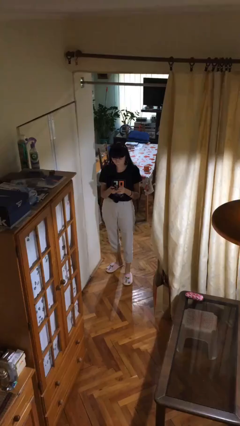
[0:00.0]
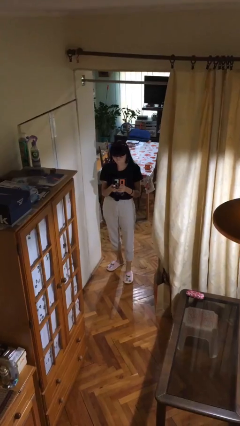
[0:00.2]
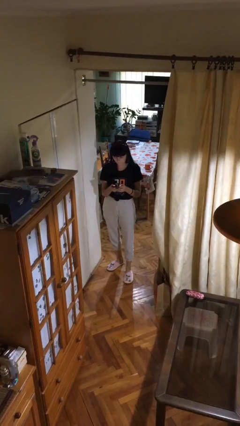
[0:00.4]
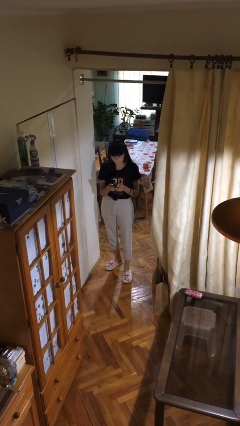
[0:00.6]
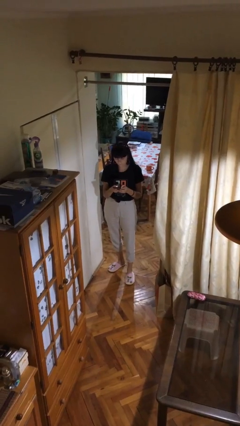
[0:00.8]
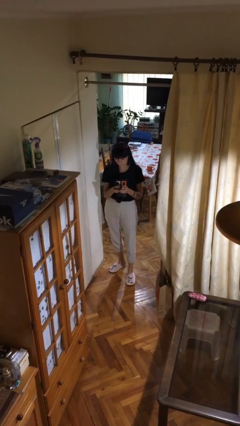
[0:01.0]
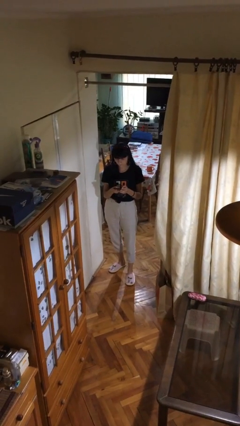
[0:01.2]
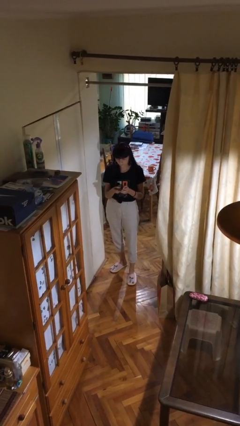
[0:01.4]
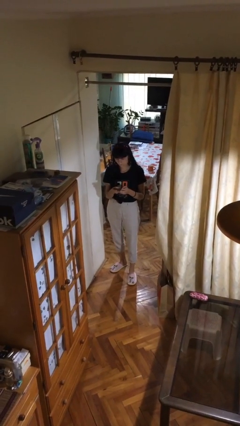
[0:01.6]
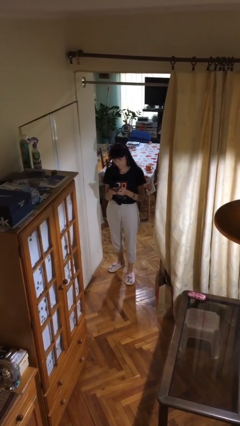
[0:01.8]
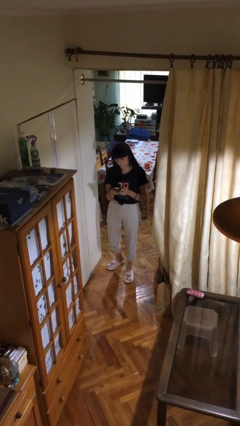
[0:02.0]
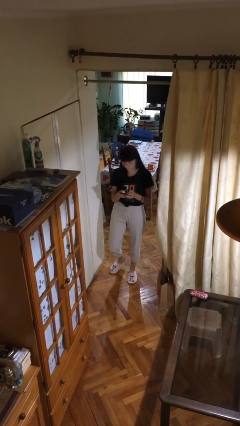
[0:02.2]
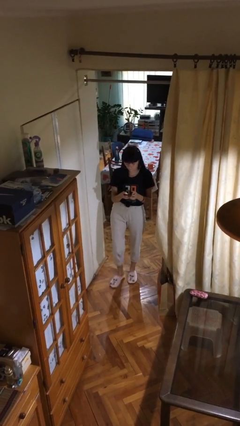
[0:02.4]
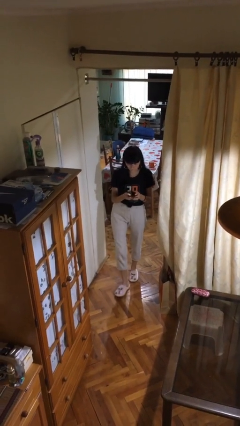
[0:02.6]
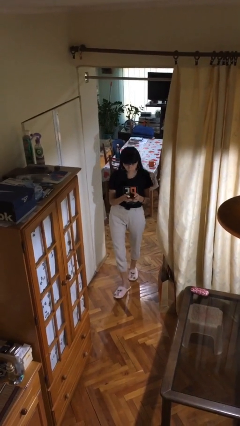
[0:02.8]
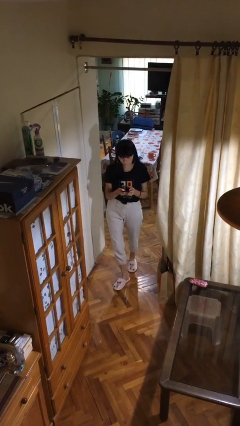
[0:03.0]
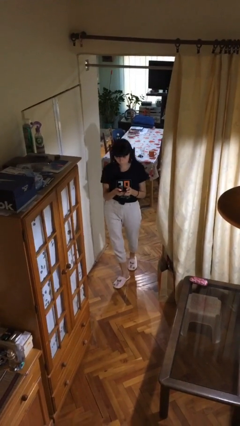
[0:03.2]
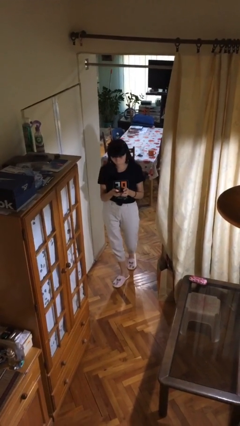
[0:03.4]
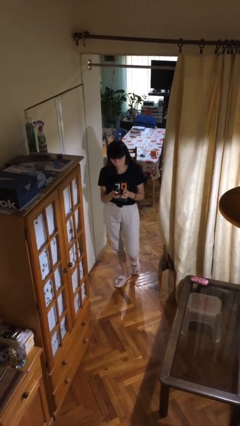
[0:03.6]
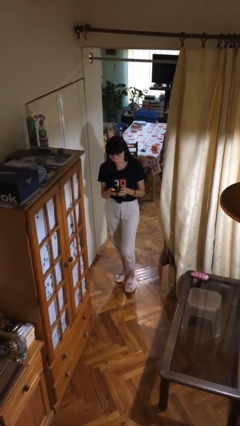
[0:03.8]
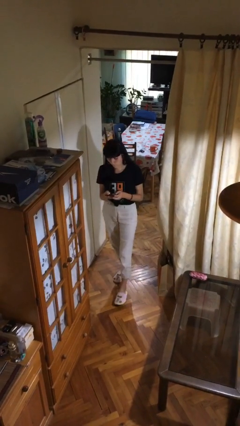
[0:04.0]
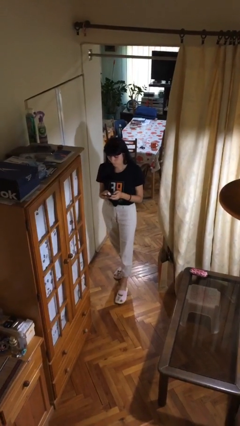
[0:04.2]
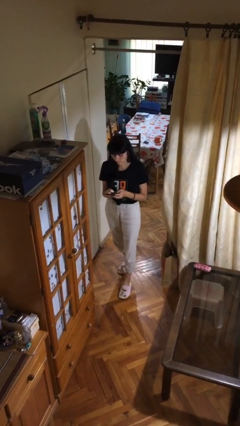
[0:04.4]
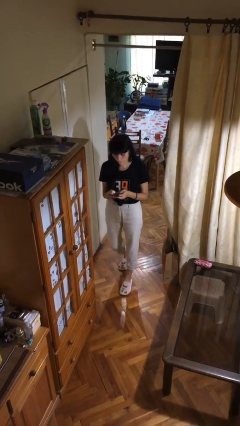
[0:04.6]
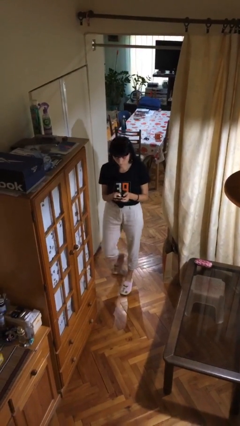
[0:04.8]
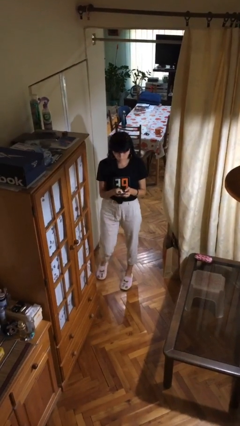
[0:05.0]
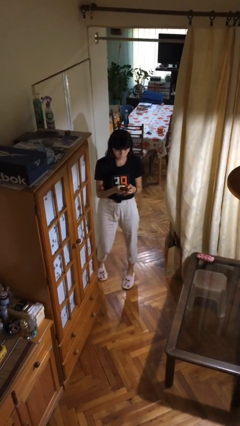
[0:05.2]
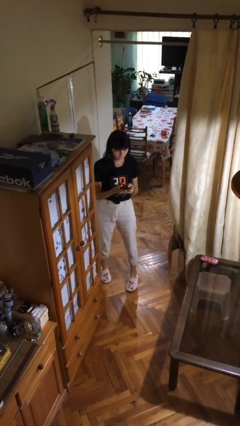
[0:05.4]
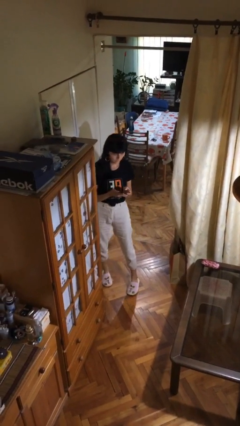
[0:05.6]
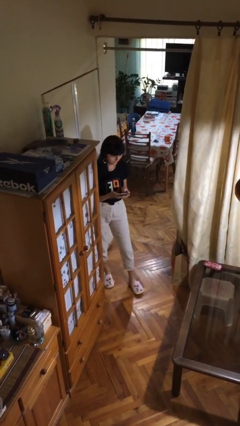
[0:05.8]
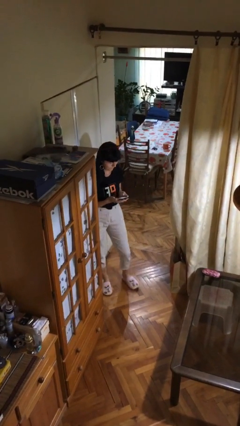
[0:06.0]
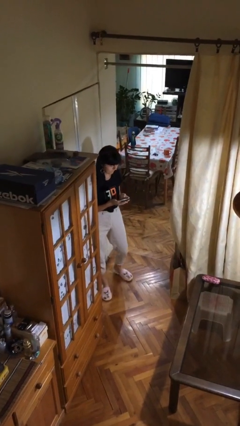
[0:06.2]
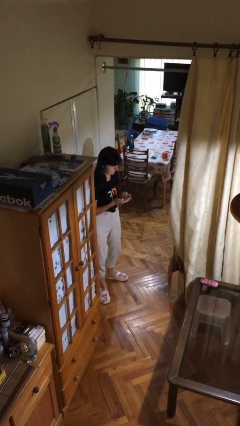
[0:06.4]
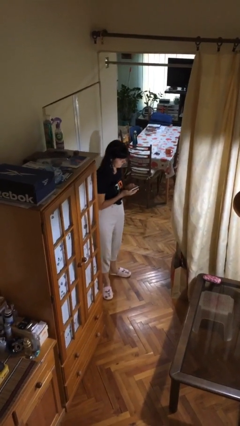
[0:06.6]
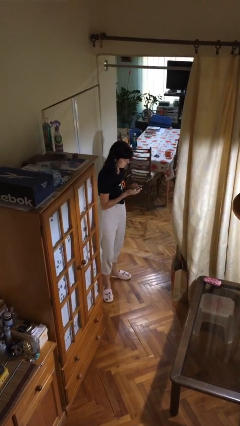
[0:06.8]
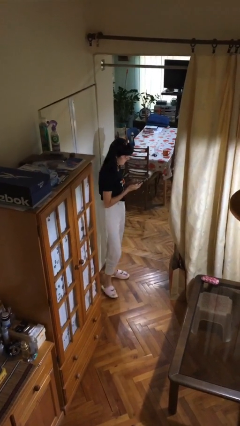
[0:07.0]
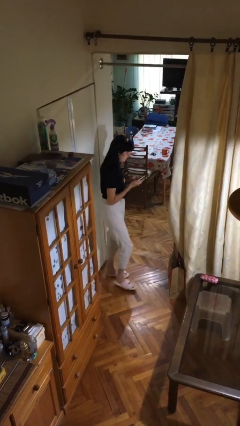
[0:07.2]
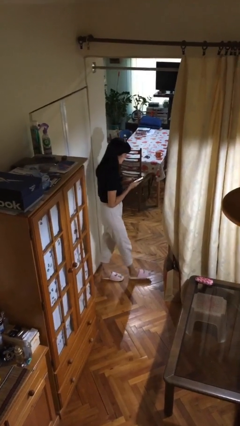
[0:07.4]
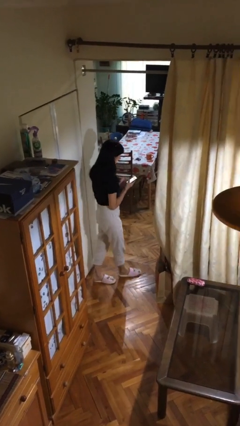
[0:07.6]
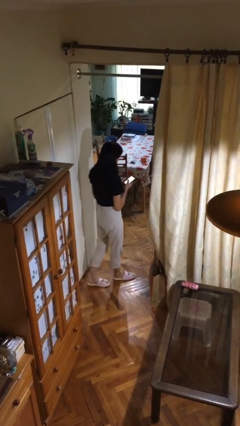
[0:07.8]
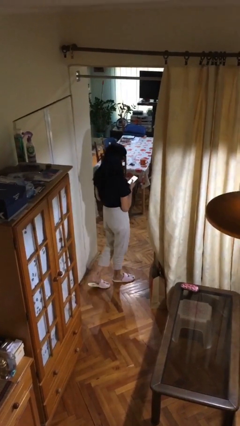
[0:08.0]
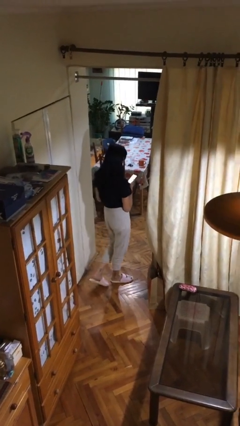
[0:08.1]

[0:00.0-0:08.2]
person texts on phone

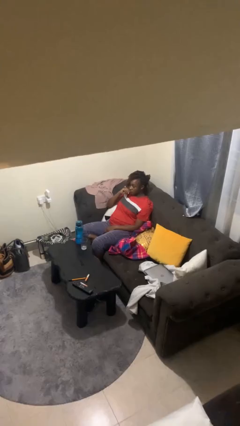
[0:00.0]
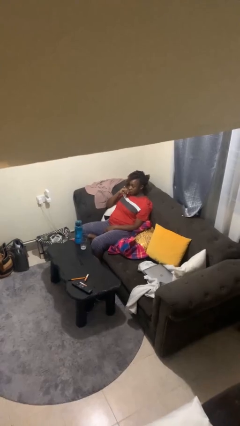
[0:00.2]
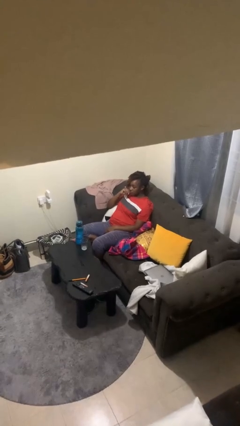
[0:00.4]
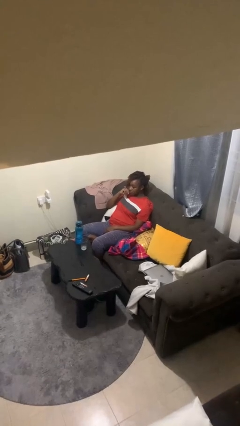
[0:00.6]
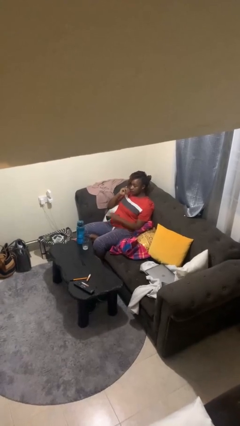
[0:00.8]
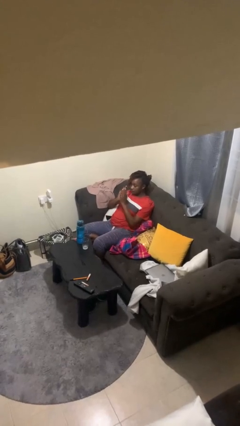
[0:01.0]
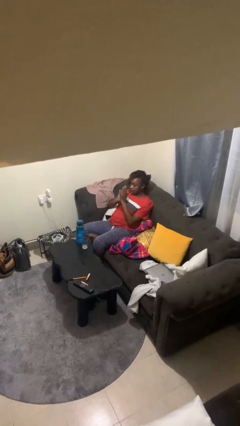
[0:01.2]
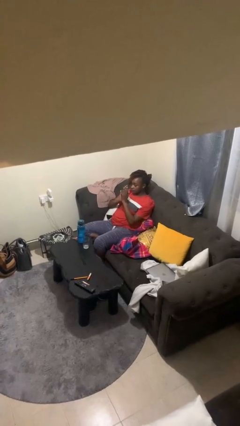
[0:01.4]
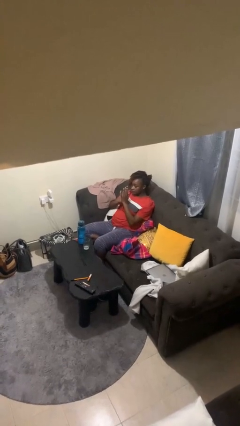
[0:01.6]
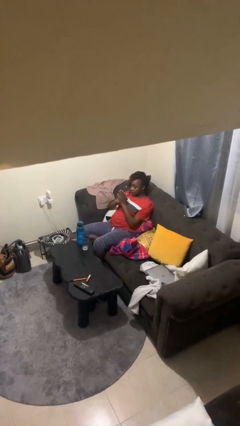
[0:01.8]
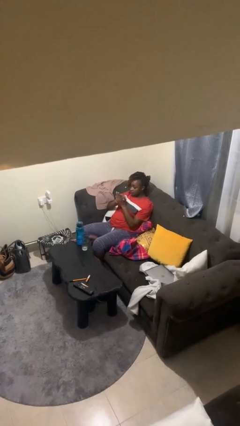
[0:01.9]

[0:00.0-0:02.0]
person claps hands

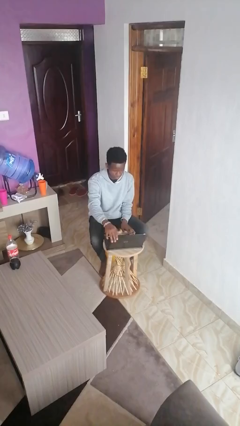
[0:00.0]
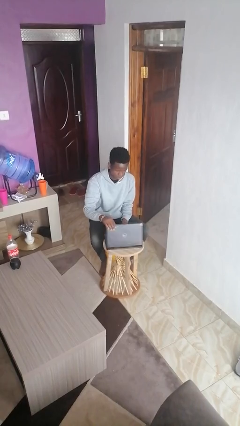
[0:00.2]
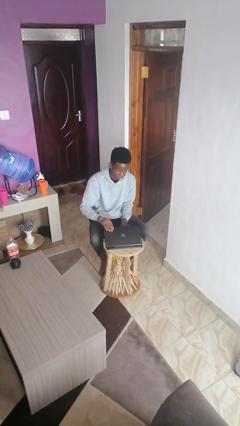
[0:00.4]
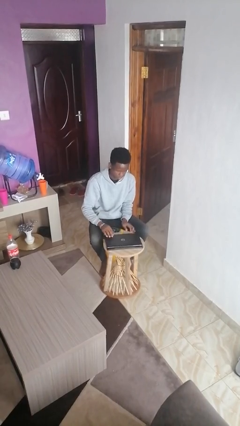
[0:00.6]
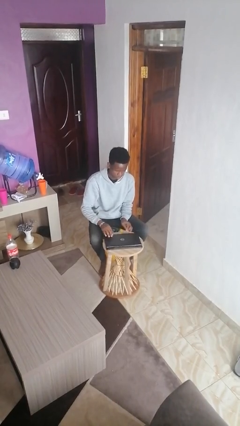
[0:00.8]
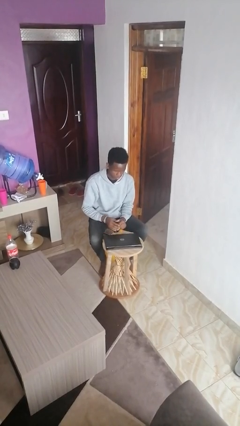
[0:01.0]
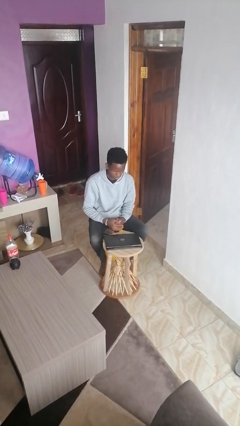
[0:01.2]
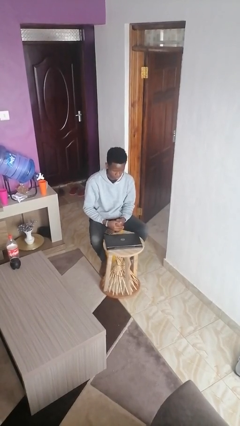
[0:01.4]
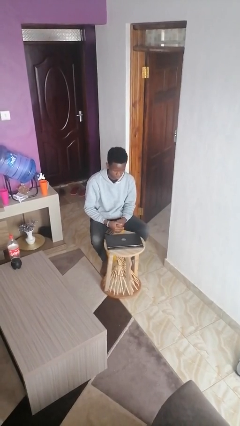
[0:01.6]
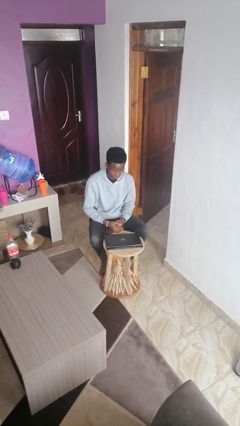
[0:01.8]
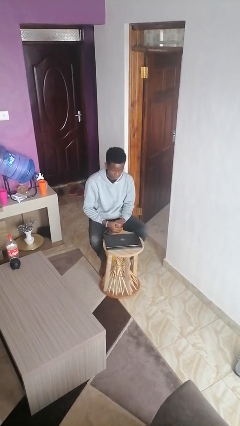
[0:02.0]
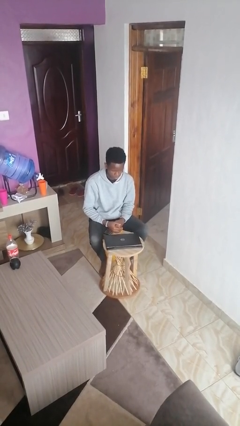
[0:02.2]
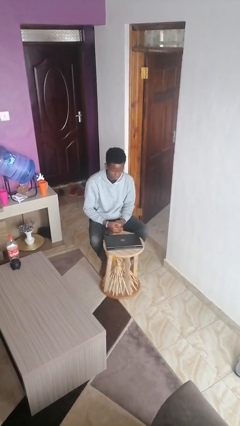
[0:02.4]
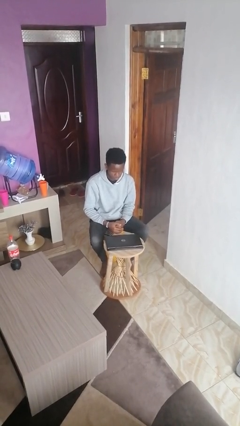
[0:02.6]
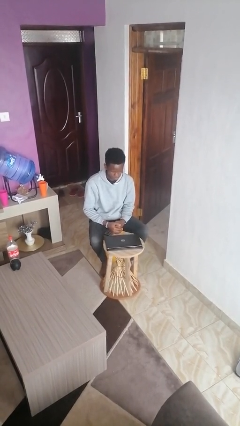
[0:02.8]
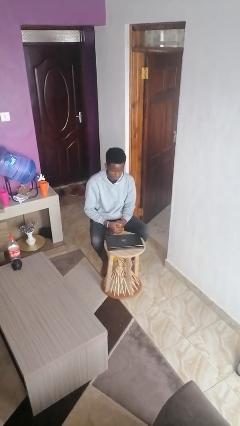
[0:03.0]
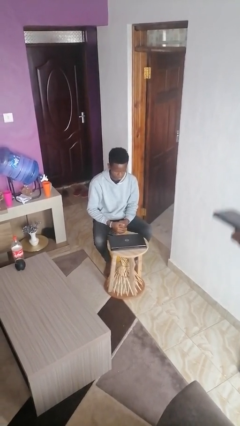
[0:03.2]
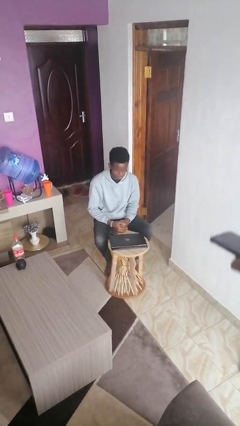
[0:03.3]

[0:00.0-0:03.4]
person closes laptop

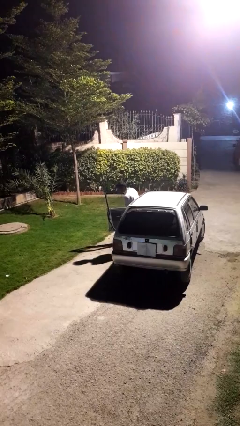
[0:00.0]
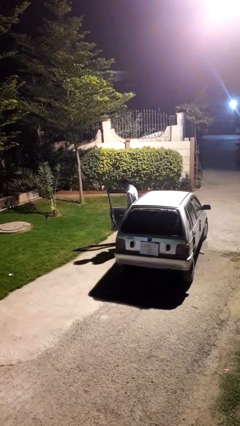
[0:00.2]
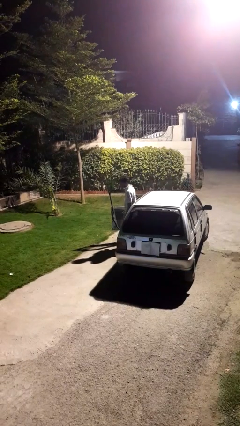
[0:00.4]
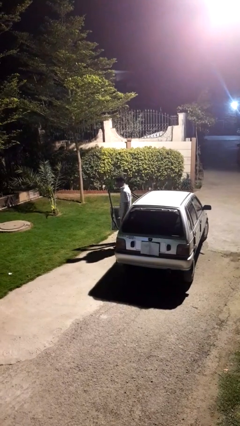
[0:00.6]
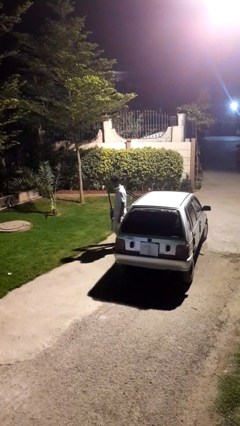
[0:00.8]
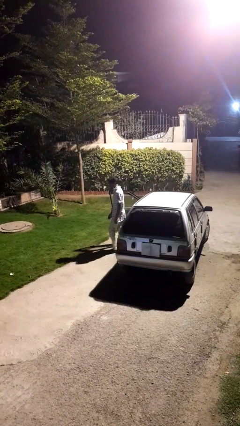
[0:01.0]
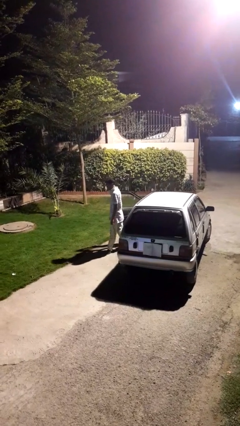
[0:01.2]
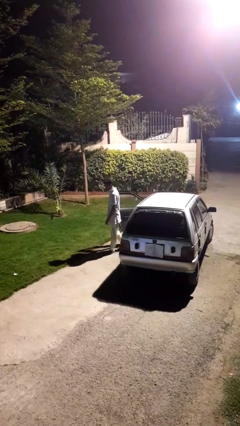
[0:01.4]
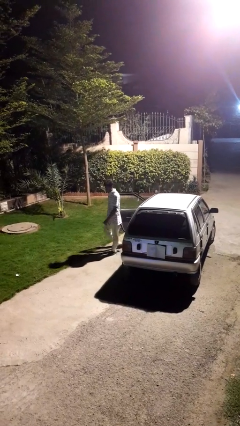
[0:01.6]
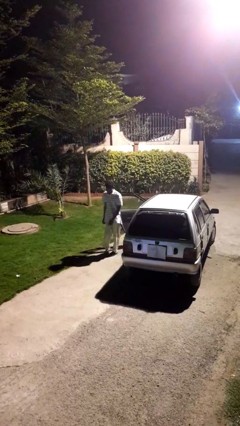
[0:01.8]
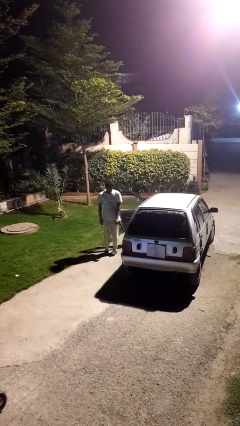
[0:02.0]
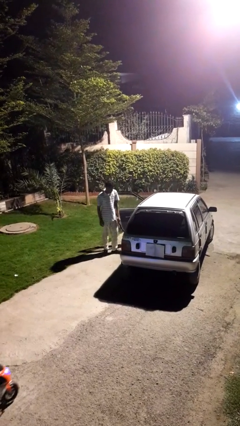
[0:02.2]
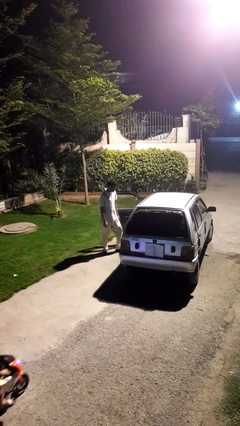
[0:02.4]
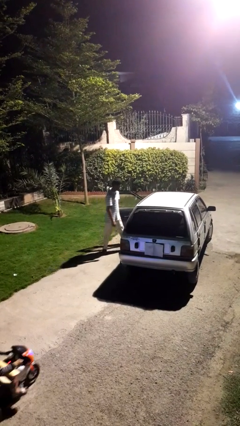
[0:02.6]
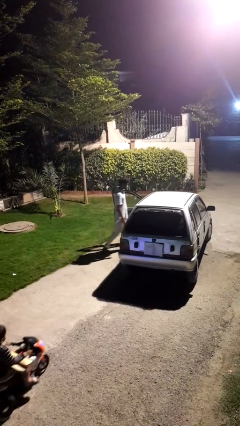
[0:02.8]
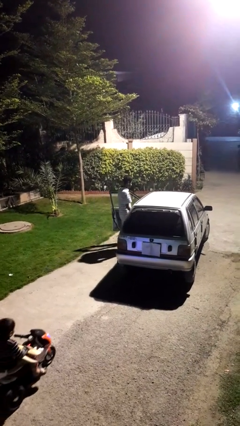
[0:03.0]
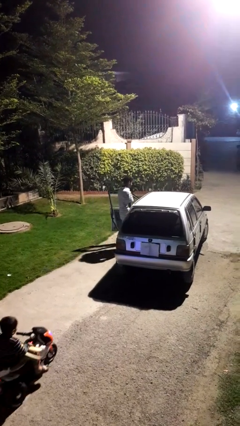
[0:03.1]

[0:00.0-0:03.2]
person exits car

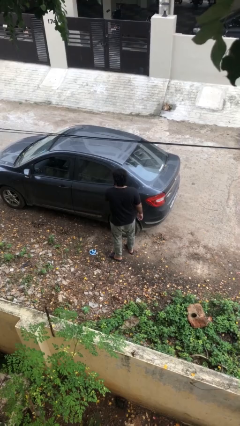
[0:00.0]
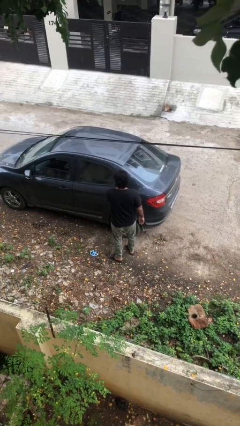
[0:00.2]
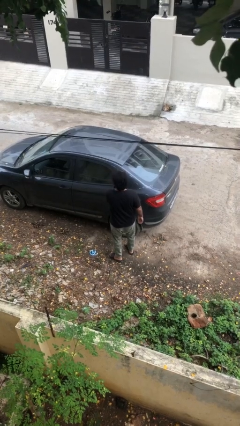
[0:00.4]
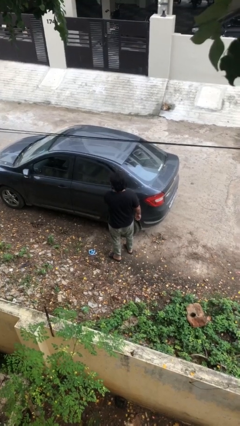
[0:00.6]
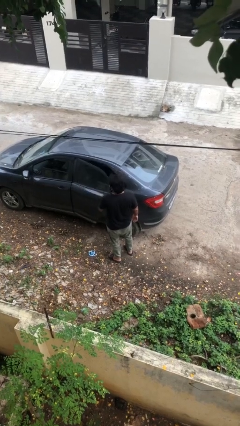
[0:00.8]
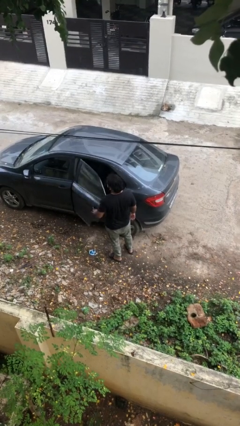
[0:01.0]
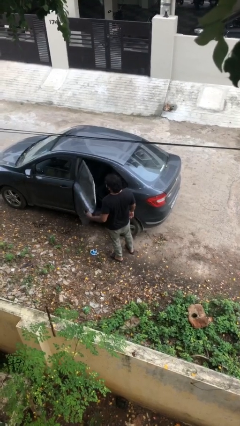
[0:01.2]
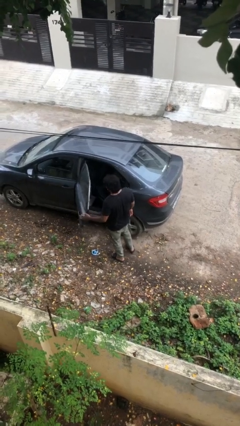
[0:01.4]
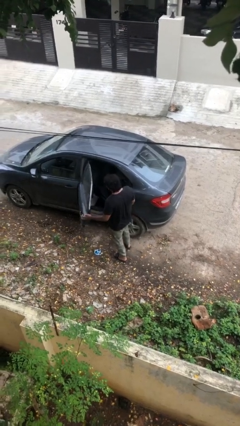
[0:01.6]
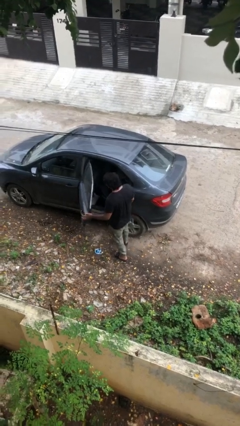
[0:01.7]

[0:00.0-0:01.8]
person opens car door
